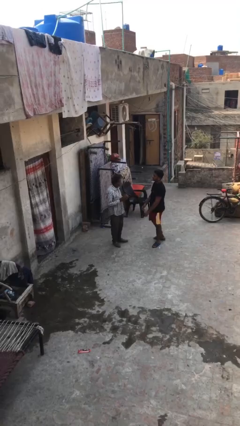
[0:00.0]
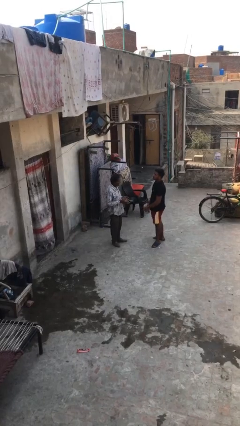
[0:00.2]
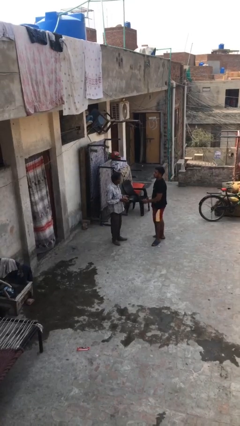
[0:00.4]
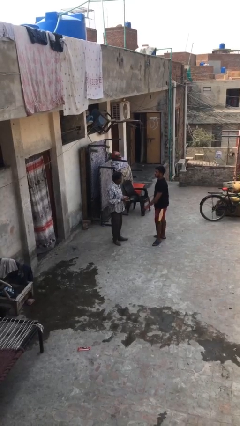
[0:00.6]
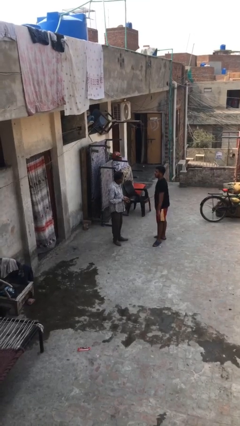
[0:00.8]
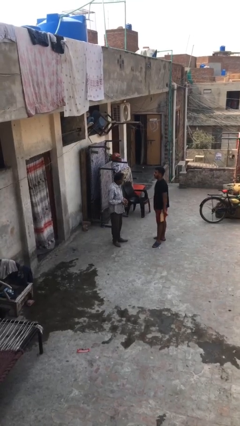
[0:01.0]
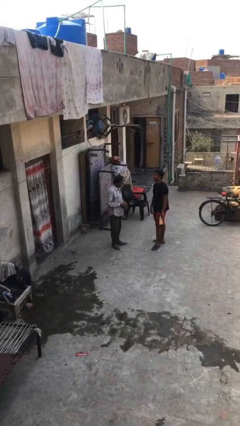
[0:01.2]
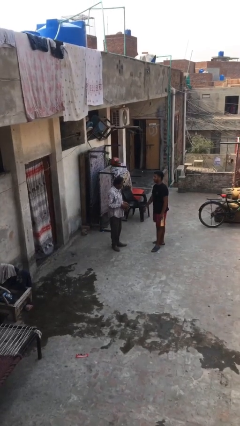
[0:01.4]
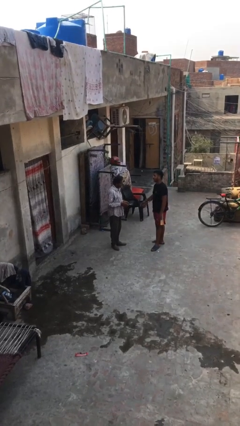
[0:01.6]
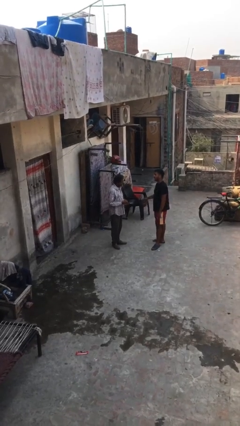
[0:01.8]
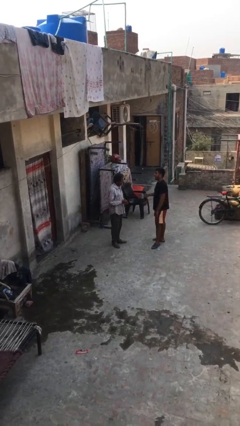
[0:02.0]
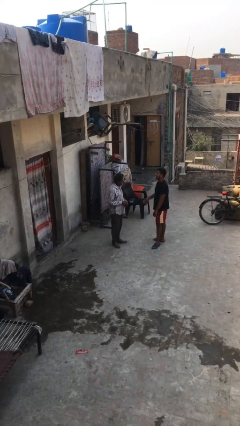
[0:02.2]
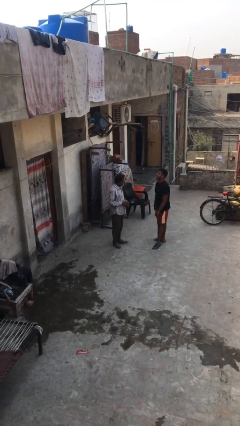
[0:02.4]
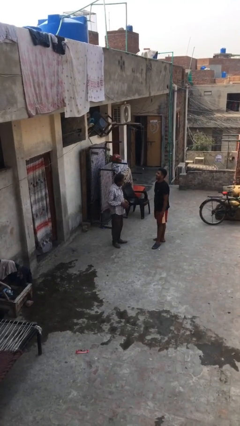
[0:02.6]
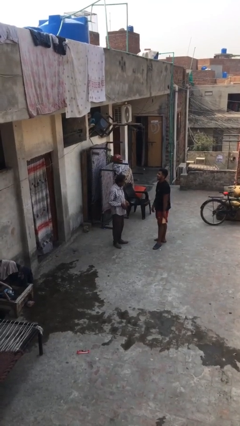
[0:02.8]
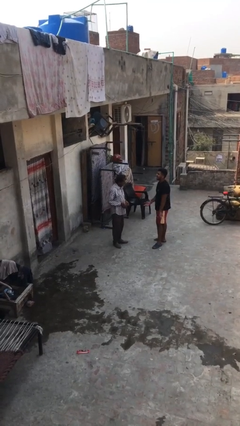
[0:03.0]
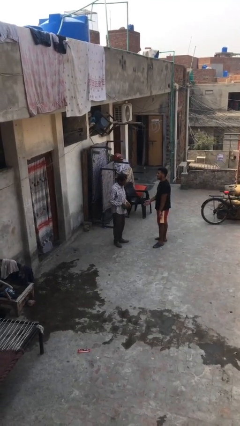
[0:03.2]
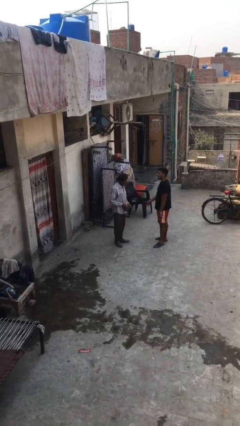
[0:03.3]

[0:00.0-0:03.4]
person talks to person

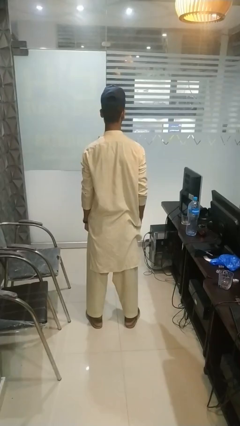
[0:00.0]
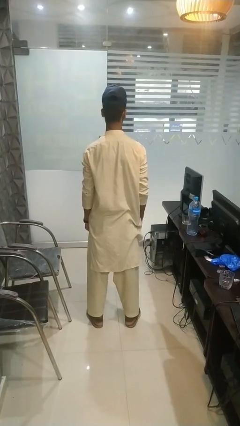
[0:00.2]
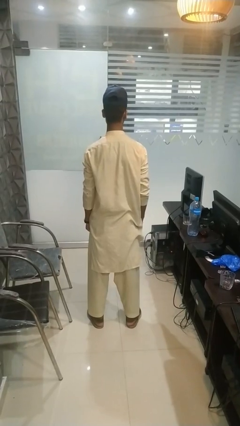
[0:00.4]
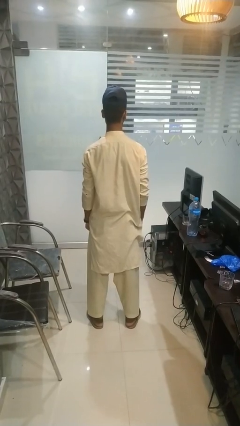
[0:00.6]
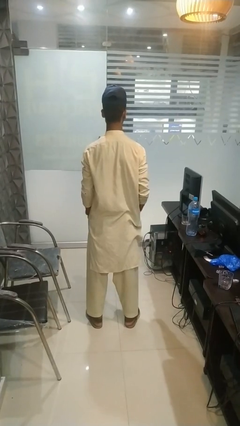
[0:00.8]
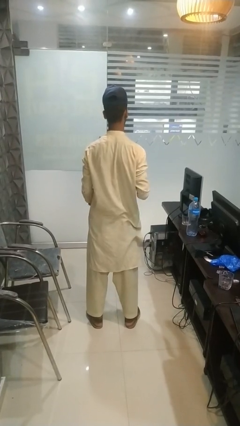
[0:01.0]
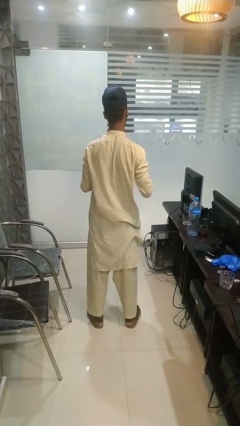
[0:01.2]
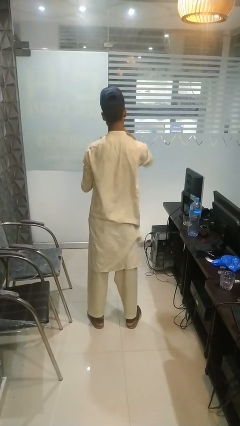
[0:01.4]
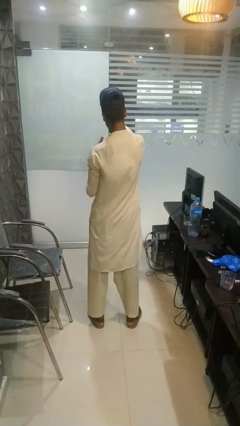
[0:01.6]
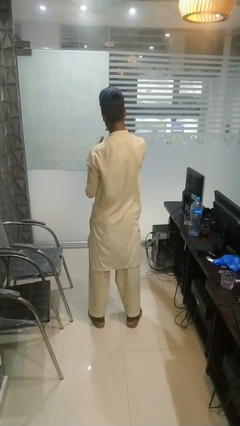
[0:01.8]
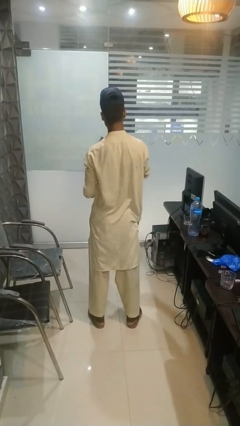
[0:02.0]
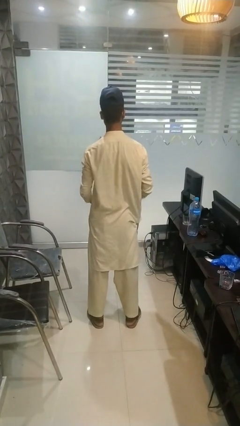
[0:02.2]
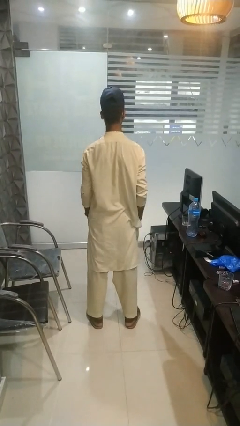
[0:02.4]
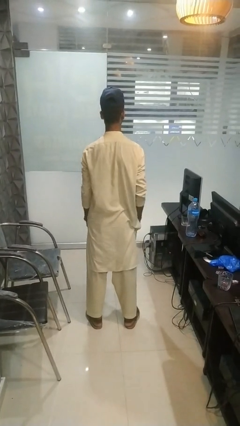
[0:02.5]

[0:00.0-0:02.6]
person punches

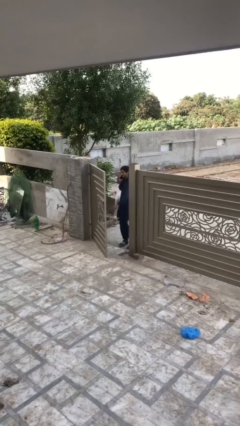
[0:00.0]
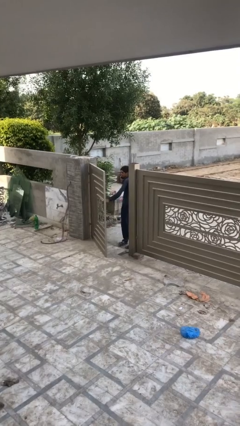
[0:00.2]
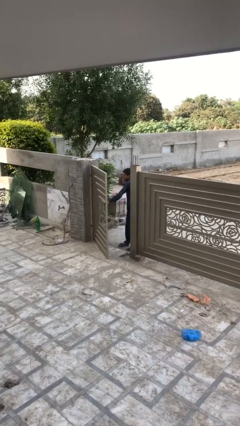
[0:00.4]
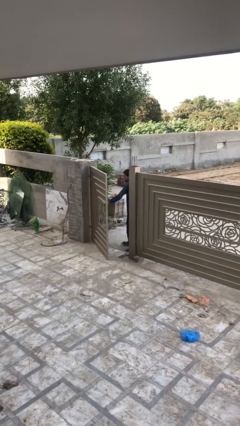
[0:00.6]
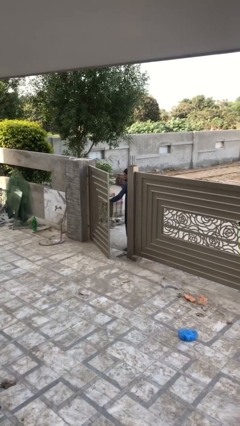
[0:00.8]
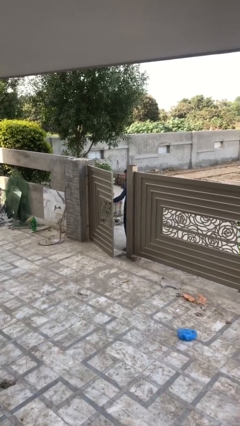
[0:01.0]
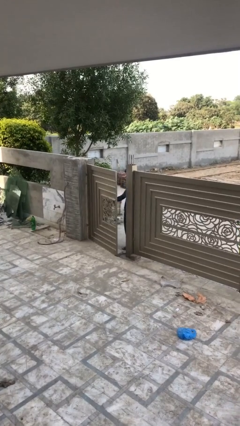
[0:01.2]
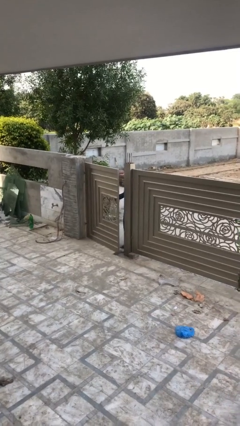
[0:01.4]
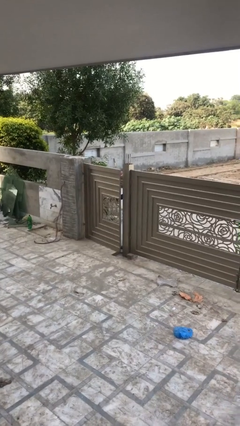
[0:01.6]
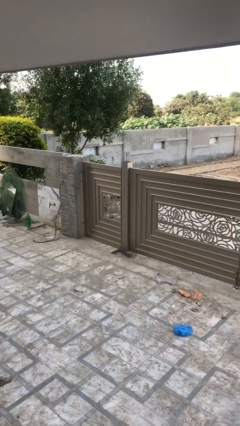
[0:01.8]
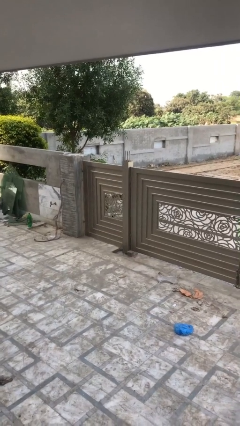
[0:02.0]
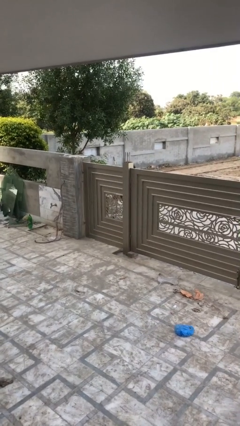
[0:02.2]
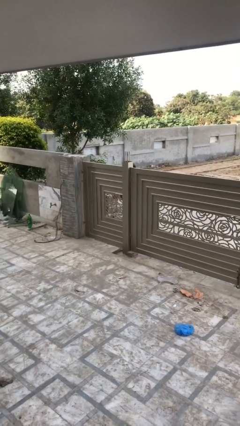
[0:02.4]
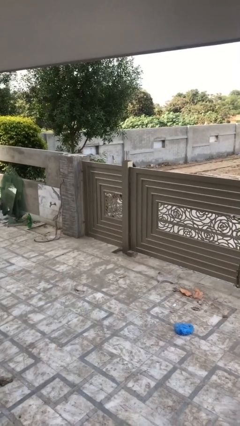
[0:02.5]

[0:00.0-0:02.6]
person closes facility door

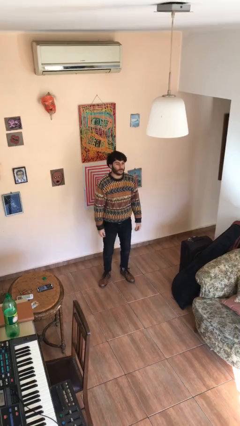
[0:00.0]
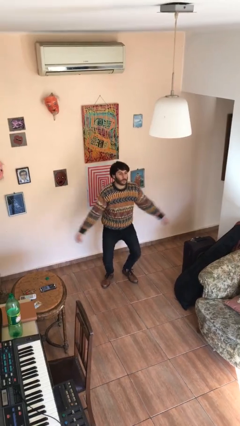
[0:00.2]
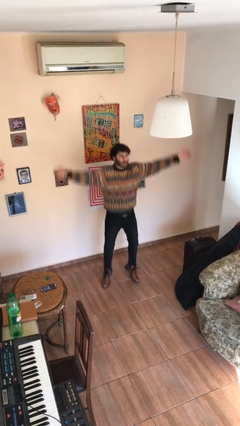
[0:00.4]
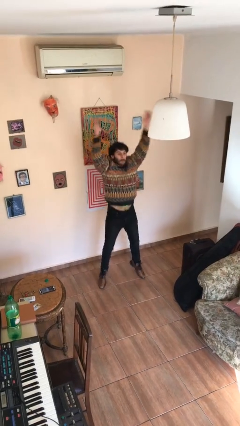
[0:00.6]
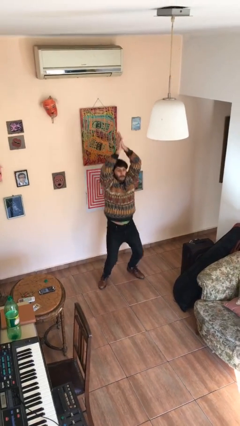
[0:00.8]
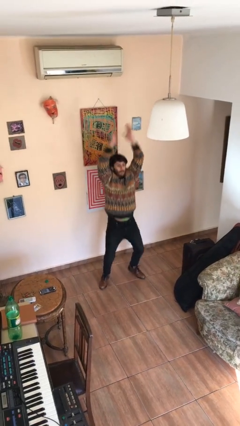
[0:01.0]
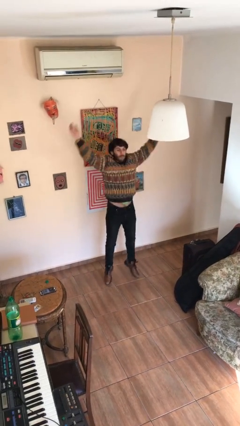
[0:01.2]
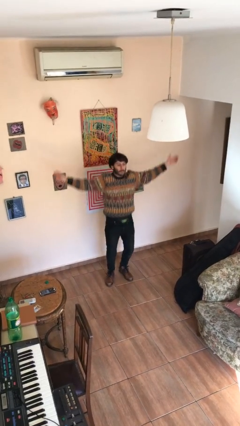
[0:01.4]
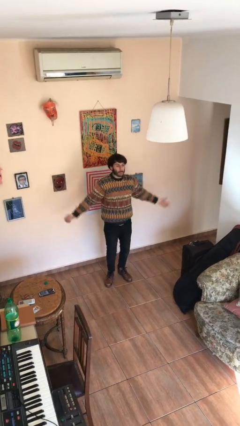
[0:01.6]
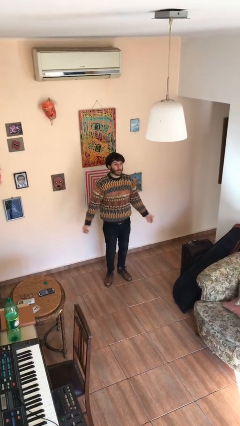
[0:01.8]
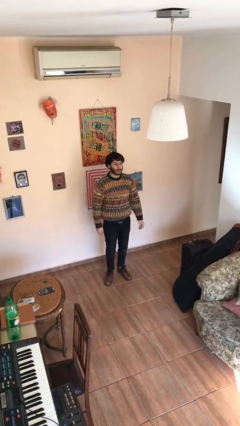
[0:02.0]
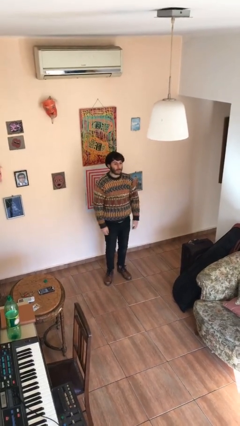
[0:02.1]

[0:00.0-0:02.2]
person exercises with jumping jacks

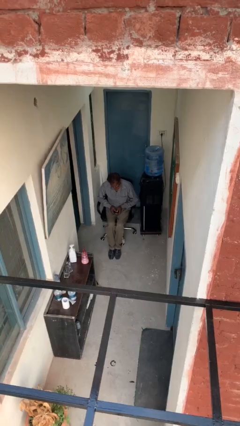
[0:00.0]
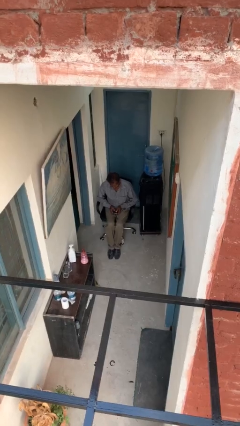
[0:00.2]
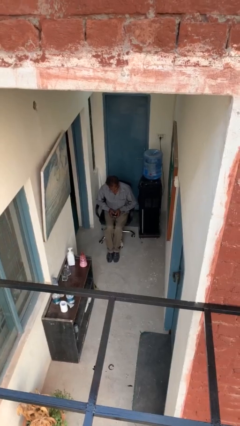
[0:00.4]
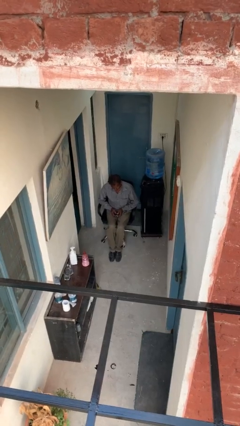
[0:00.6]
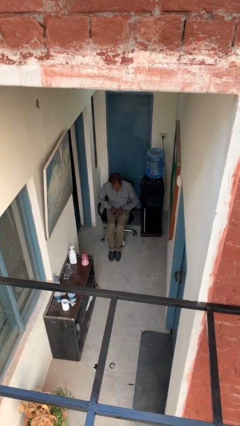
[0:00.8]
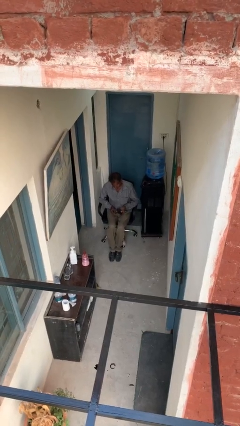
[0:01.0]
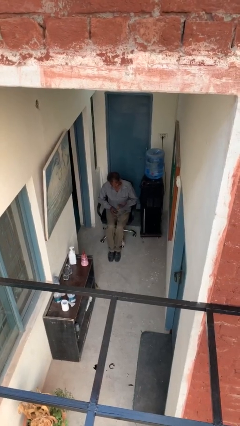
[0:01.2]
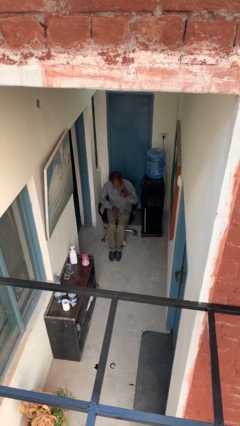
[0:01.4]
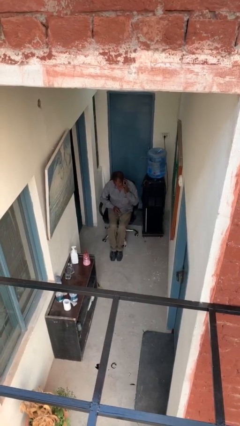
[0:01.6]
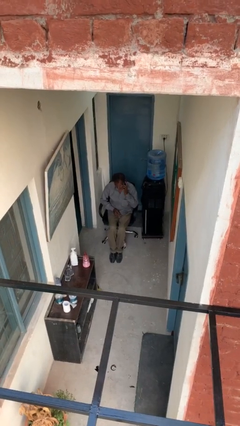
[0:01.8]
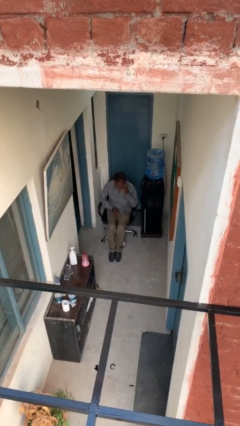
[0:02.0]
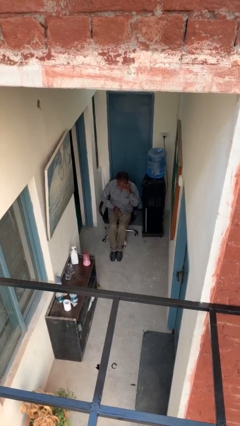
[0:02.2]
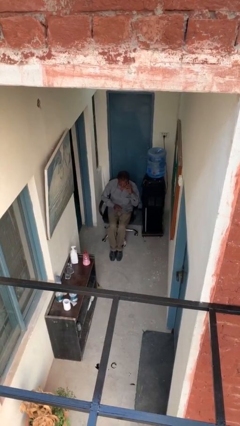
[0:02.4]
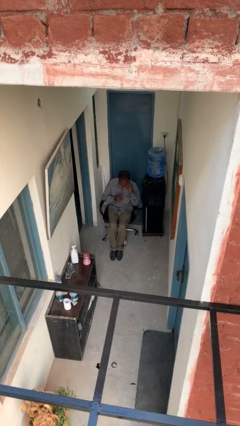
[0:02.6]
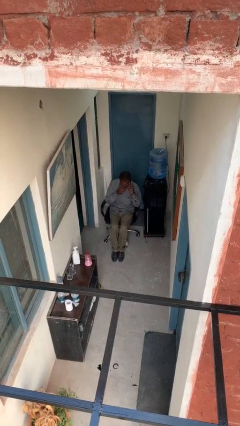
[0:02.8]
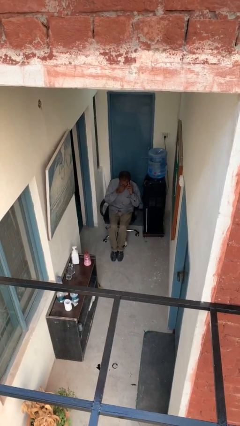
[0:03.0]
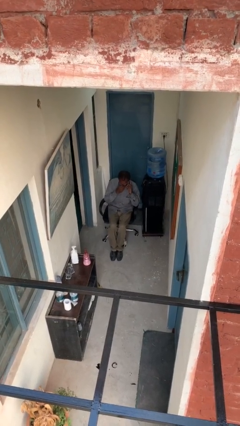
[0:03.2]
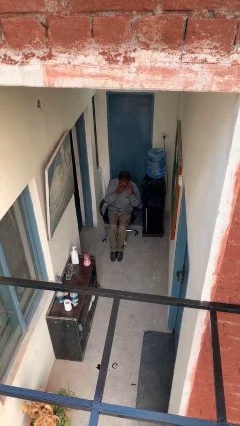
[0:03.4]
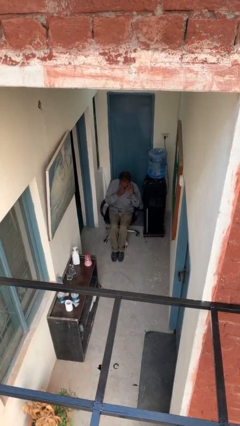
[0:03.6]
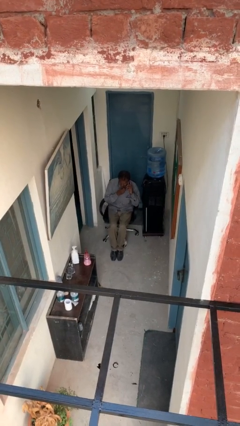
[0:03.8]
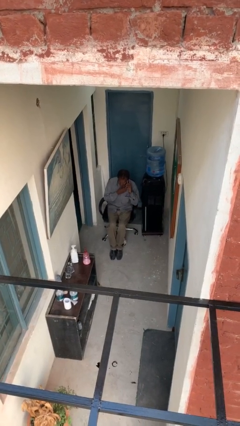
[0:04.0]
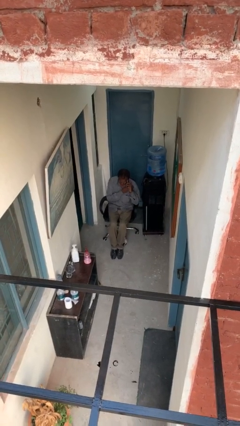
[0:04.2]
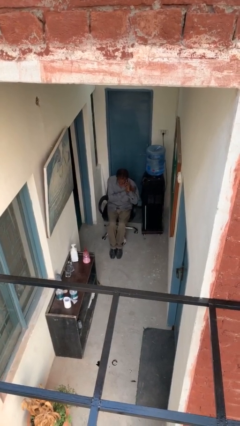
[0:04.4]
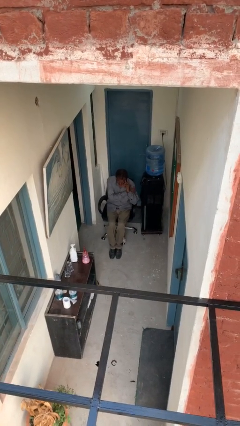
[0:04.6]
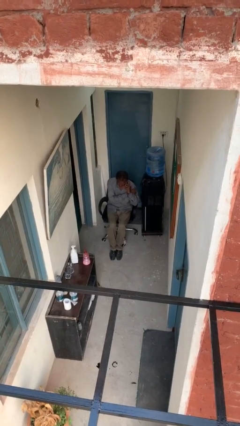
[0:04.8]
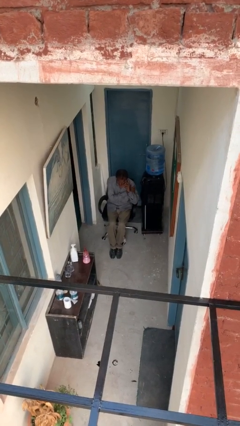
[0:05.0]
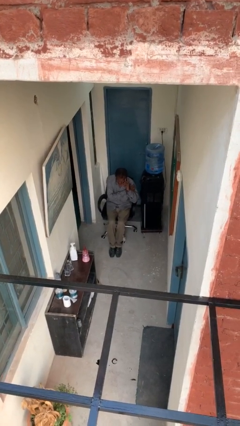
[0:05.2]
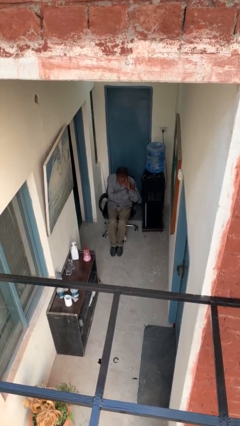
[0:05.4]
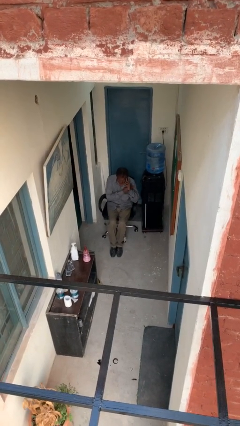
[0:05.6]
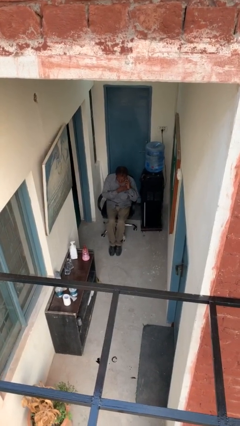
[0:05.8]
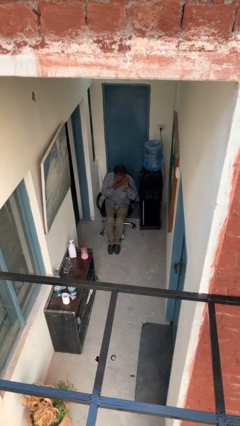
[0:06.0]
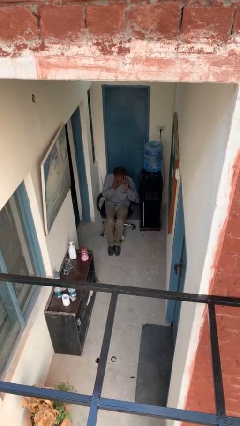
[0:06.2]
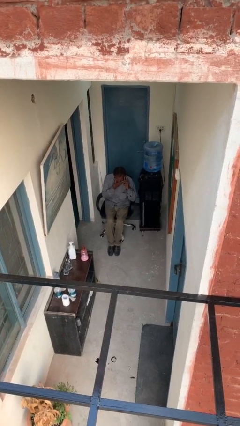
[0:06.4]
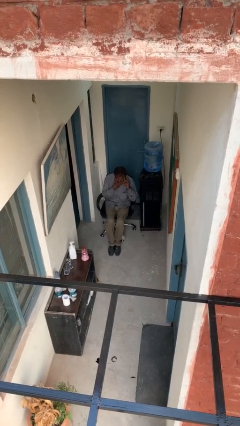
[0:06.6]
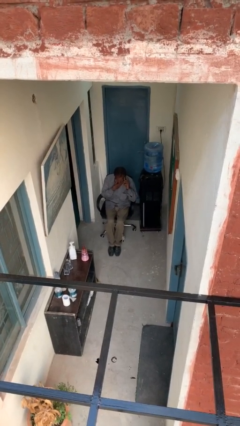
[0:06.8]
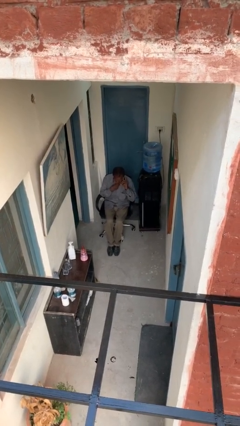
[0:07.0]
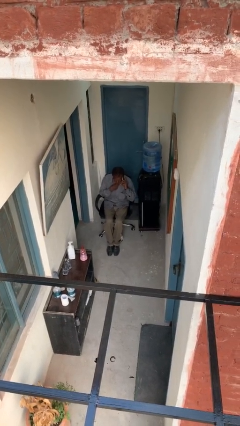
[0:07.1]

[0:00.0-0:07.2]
person talks on phone

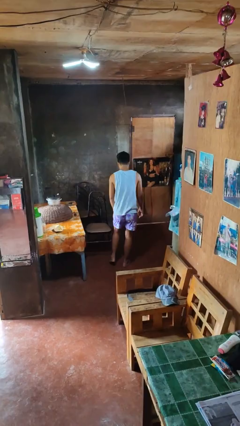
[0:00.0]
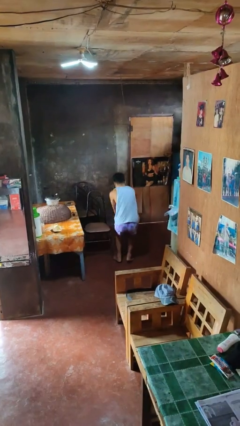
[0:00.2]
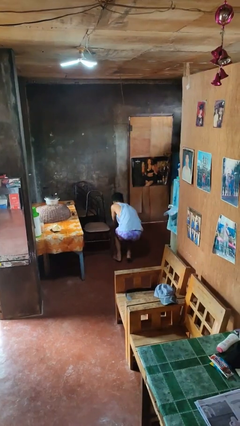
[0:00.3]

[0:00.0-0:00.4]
person trips on object on floor
